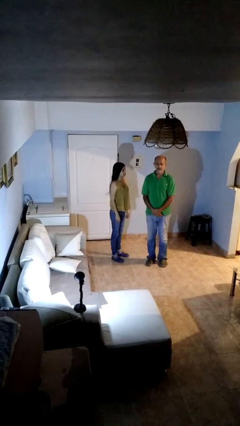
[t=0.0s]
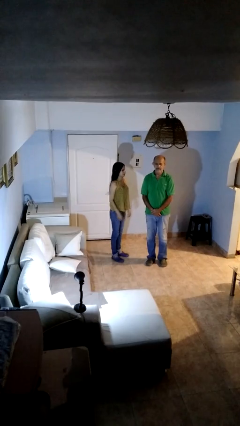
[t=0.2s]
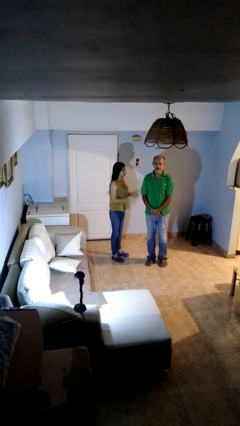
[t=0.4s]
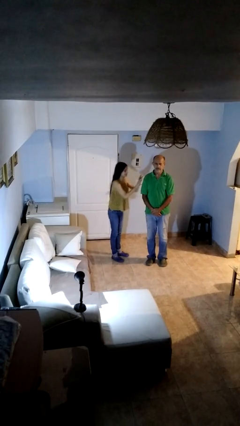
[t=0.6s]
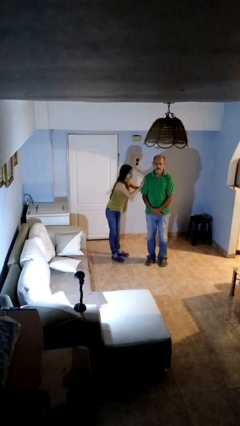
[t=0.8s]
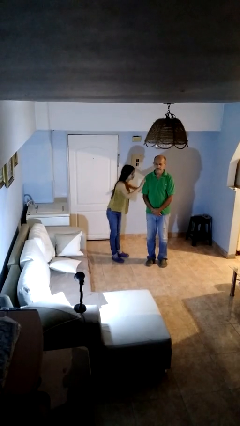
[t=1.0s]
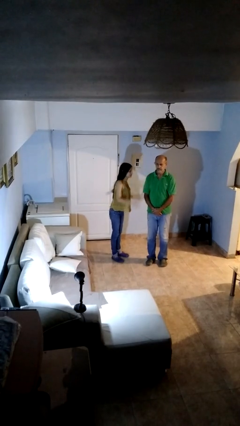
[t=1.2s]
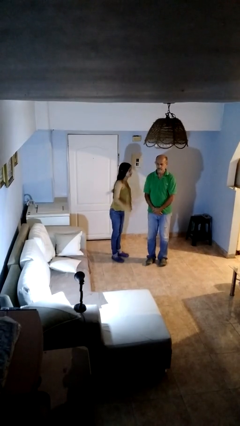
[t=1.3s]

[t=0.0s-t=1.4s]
person shoves person

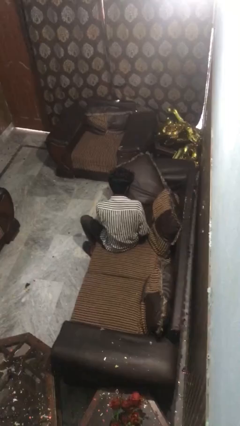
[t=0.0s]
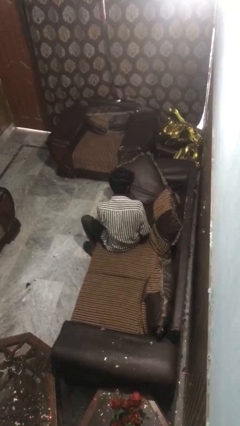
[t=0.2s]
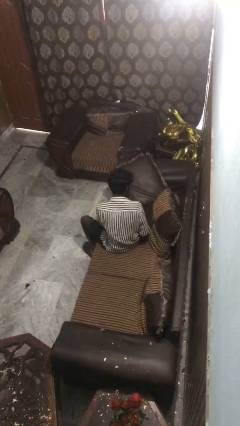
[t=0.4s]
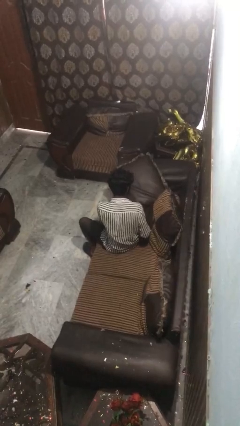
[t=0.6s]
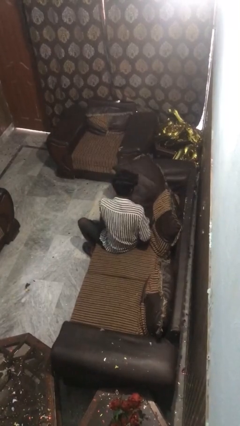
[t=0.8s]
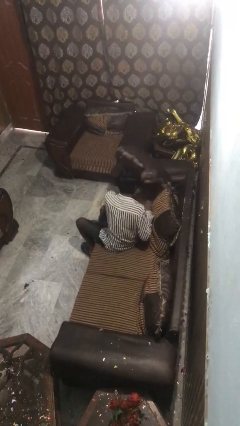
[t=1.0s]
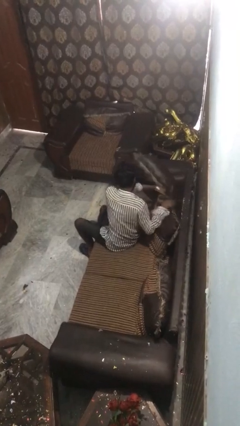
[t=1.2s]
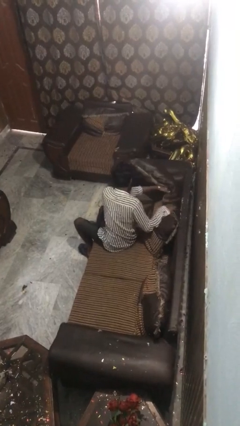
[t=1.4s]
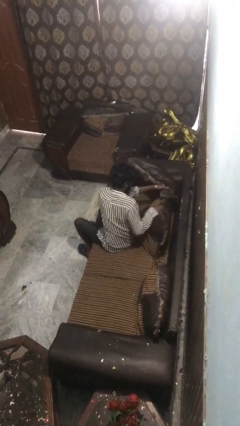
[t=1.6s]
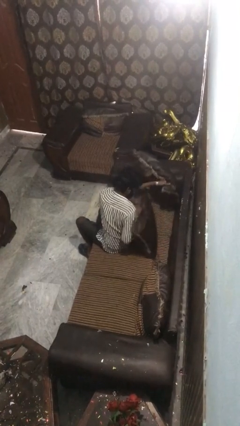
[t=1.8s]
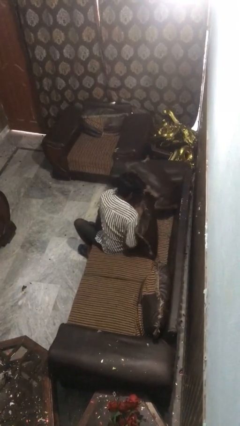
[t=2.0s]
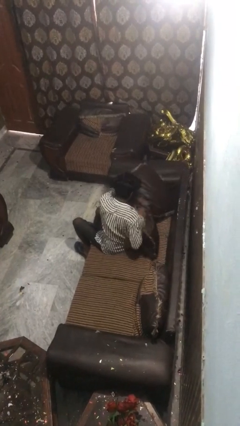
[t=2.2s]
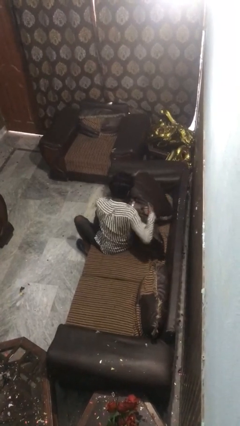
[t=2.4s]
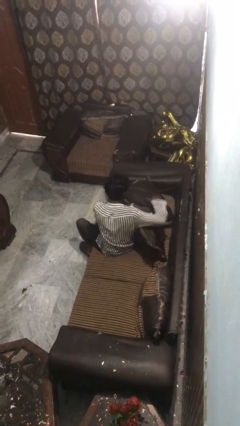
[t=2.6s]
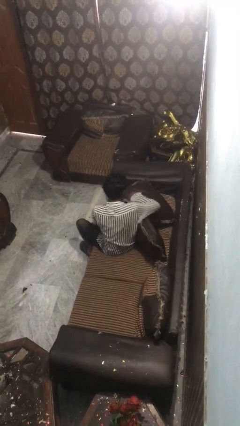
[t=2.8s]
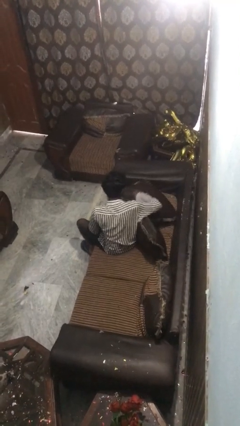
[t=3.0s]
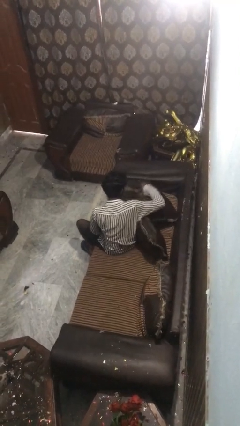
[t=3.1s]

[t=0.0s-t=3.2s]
person searches in couch

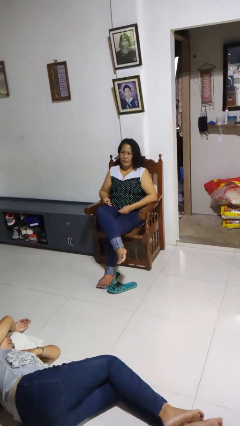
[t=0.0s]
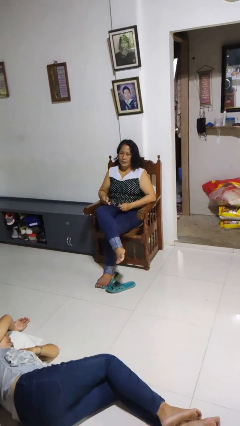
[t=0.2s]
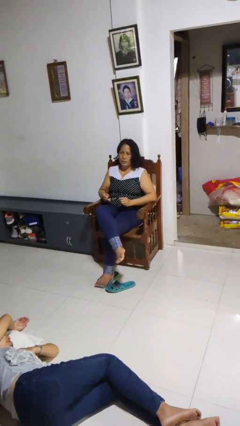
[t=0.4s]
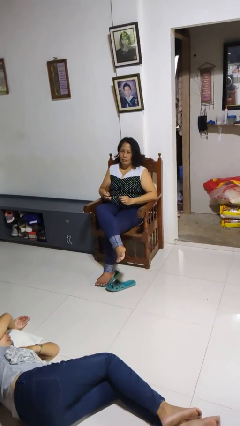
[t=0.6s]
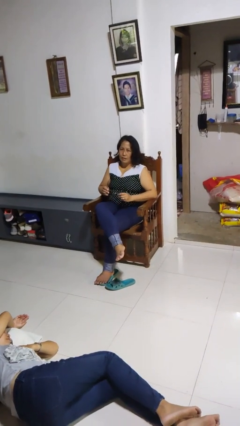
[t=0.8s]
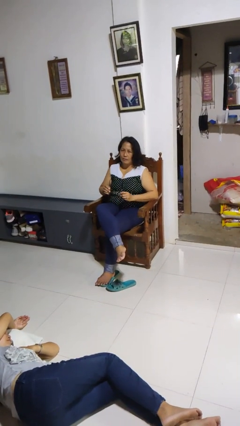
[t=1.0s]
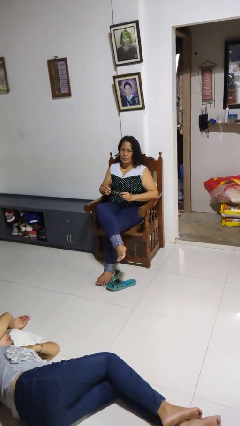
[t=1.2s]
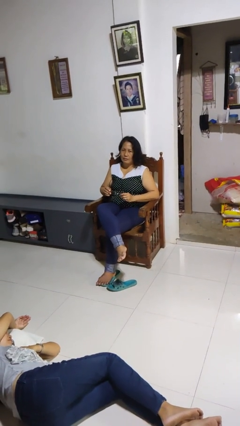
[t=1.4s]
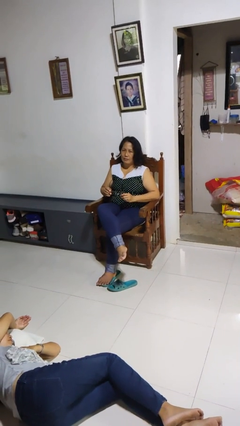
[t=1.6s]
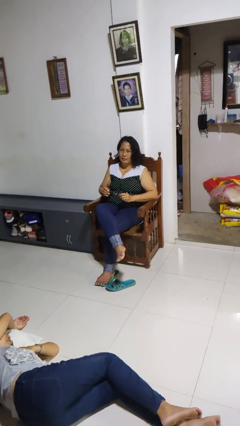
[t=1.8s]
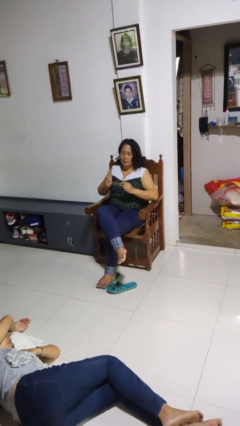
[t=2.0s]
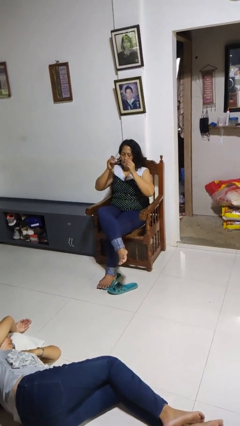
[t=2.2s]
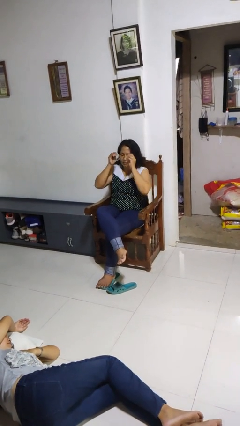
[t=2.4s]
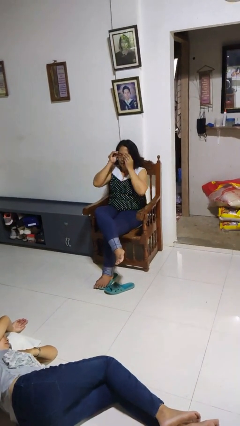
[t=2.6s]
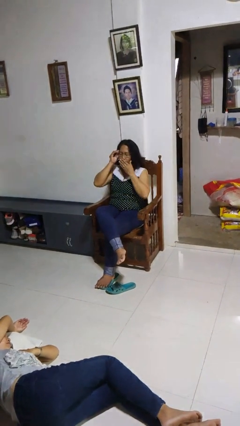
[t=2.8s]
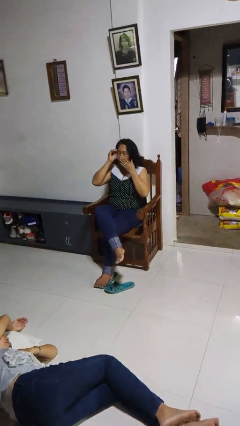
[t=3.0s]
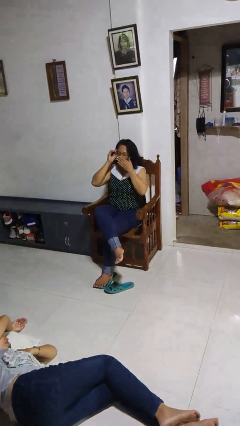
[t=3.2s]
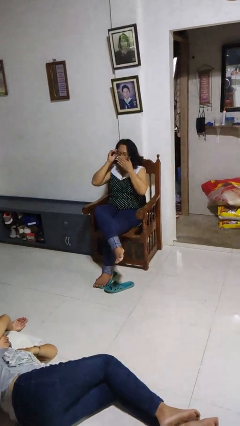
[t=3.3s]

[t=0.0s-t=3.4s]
person puts on glasses

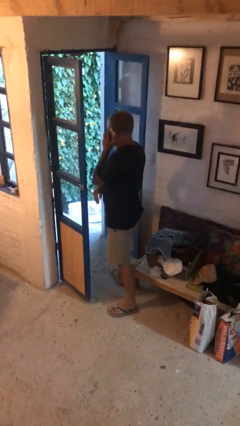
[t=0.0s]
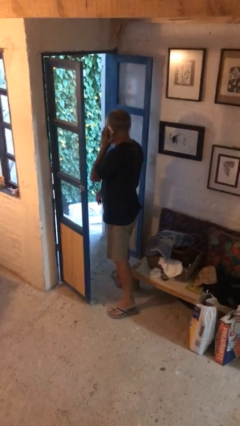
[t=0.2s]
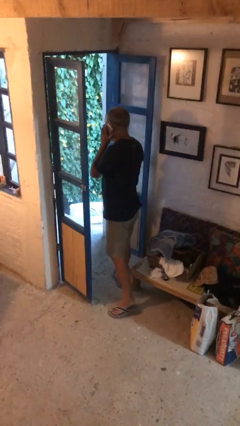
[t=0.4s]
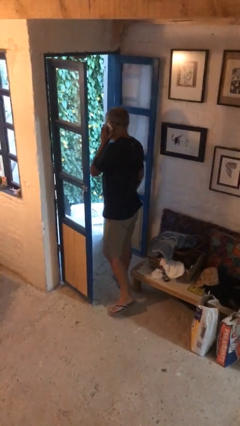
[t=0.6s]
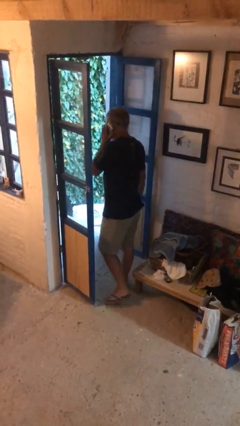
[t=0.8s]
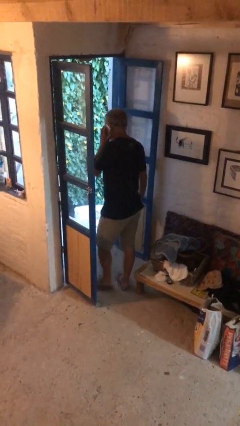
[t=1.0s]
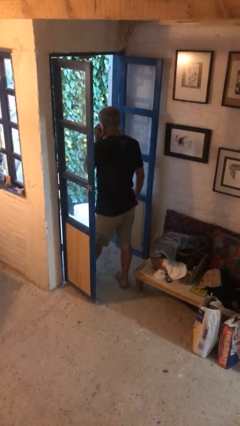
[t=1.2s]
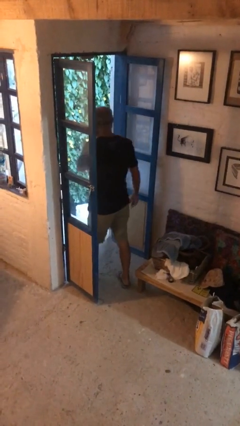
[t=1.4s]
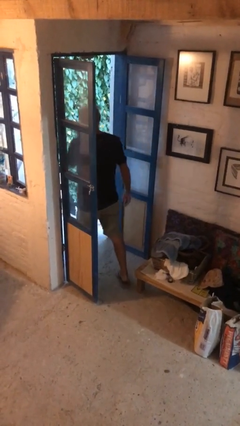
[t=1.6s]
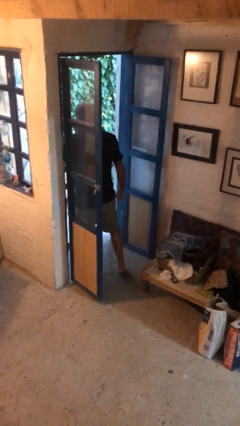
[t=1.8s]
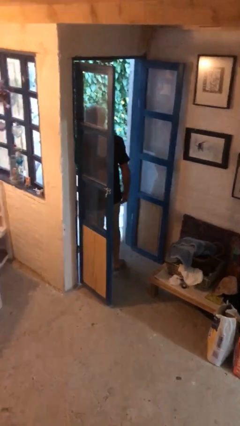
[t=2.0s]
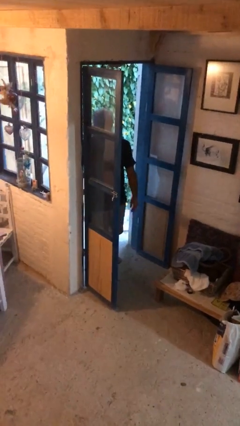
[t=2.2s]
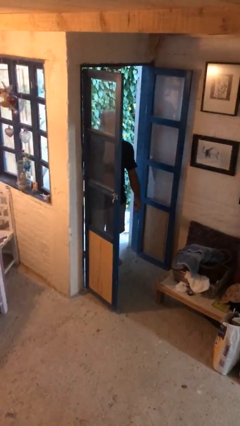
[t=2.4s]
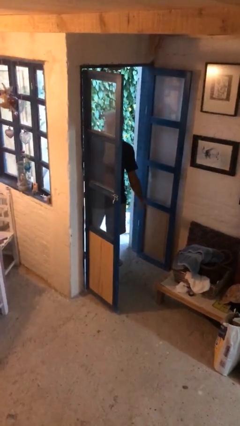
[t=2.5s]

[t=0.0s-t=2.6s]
person exits scene through structure

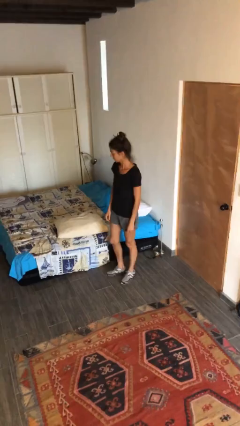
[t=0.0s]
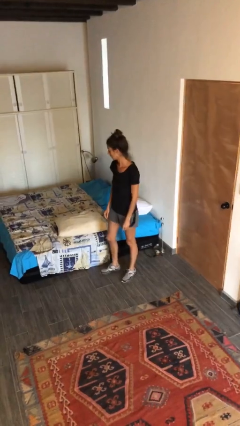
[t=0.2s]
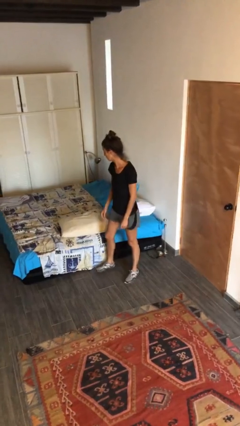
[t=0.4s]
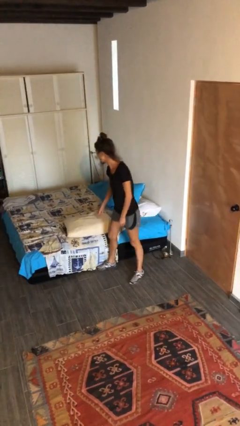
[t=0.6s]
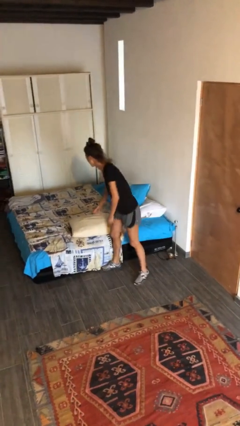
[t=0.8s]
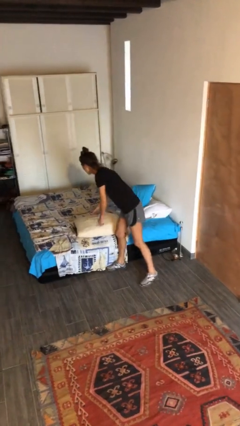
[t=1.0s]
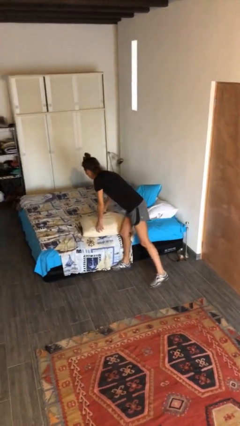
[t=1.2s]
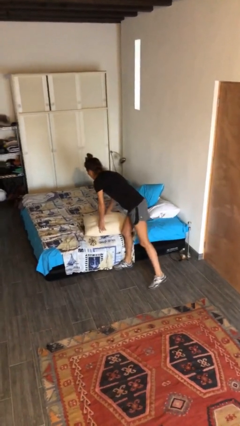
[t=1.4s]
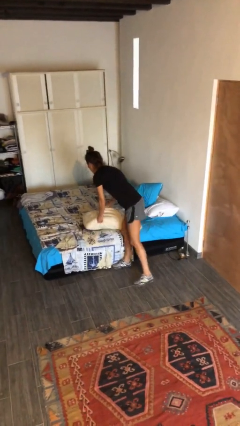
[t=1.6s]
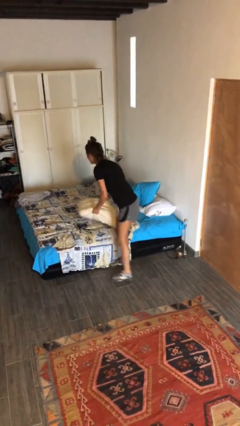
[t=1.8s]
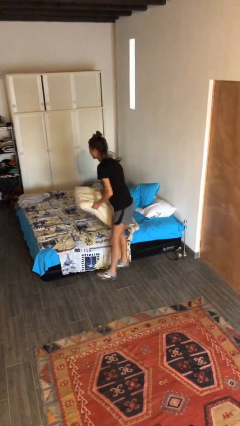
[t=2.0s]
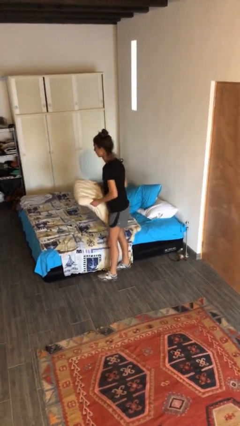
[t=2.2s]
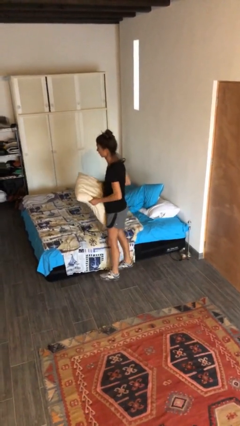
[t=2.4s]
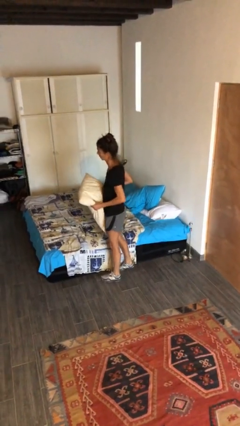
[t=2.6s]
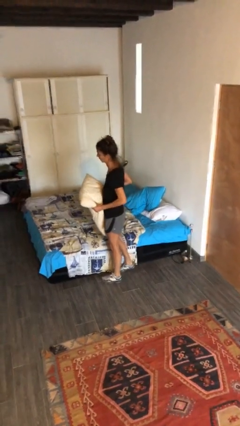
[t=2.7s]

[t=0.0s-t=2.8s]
person picks up object from bed

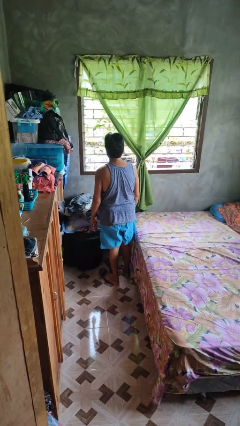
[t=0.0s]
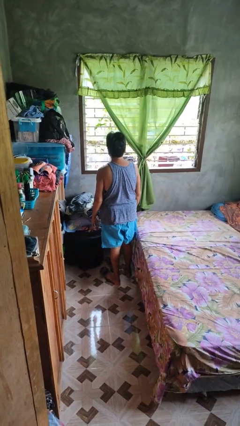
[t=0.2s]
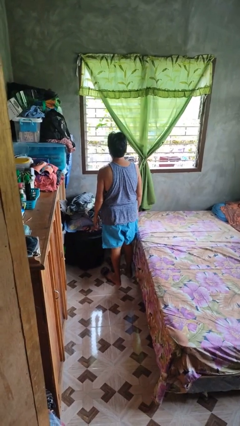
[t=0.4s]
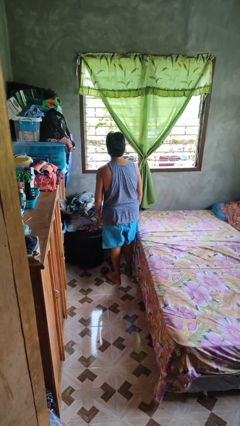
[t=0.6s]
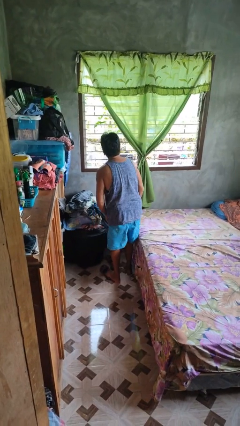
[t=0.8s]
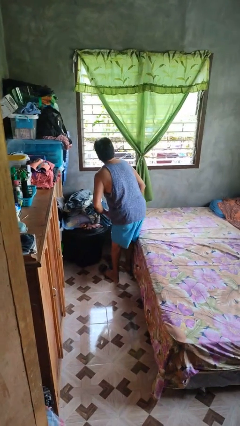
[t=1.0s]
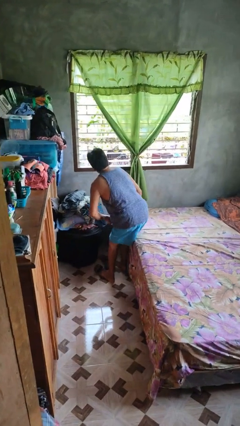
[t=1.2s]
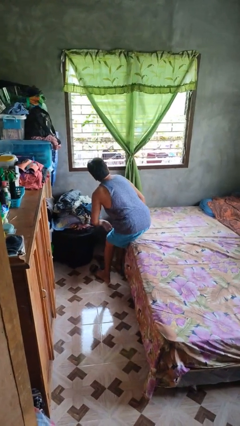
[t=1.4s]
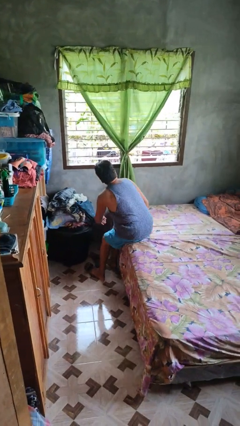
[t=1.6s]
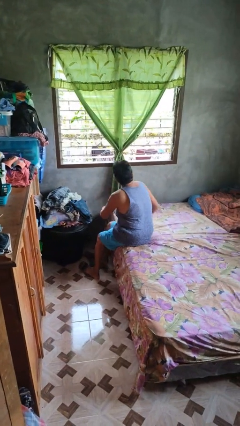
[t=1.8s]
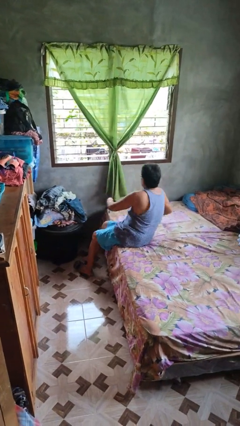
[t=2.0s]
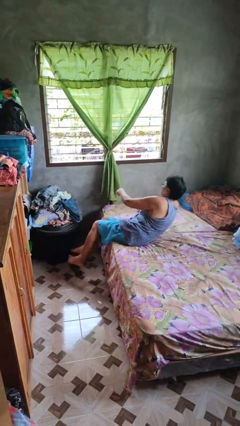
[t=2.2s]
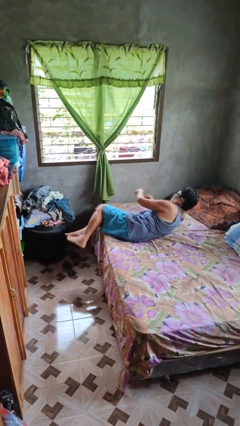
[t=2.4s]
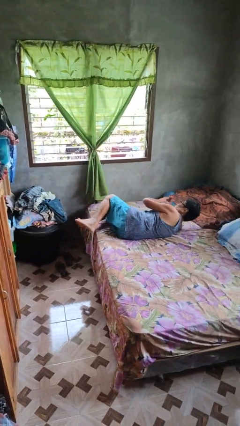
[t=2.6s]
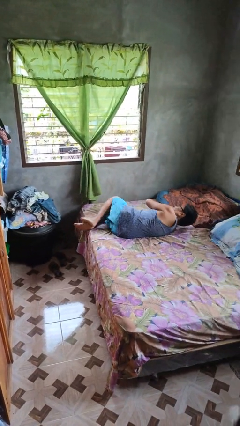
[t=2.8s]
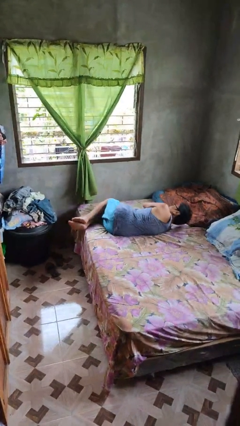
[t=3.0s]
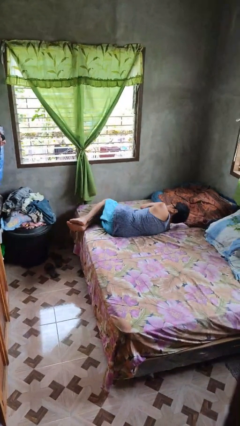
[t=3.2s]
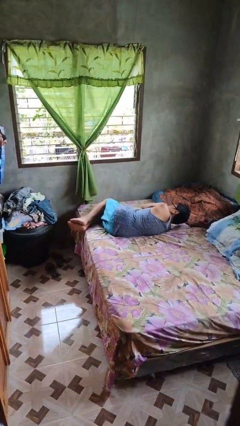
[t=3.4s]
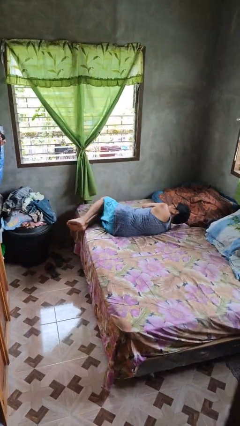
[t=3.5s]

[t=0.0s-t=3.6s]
person lies down on bed
